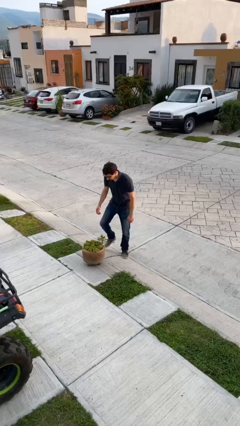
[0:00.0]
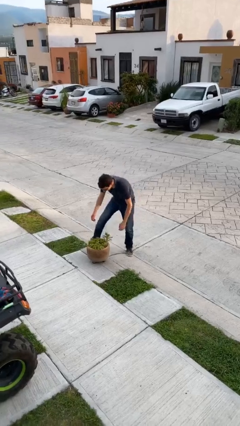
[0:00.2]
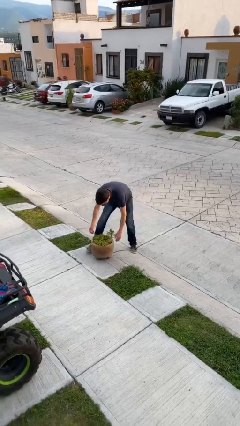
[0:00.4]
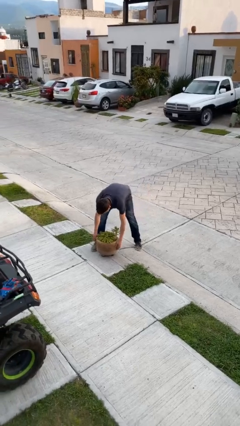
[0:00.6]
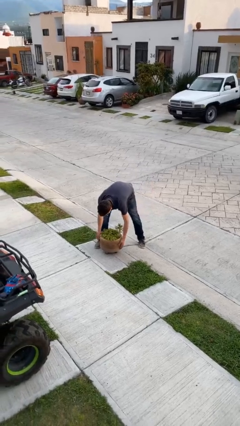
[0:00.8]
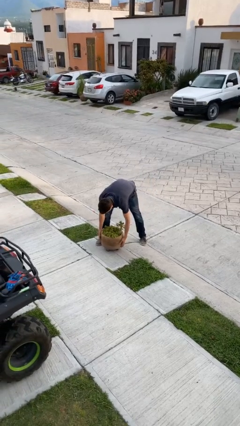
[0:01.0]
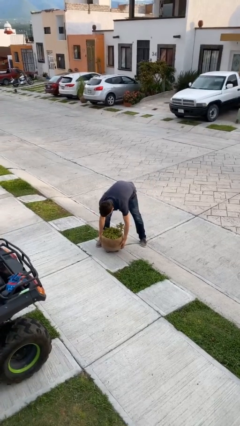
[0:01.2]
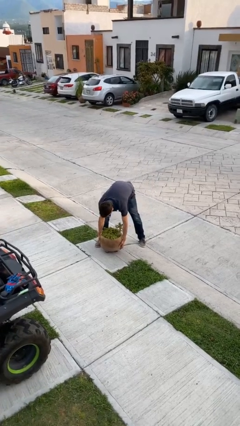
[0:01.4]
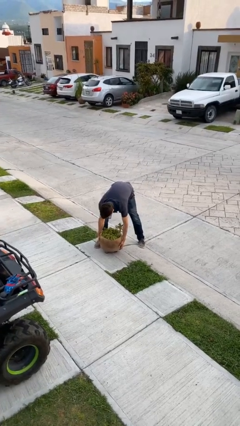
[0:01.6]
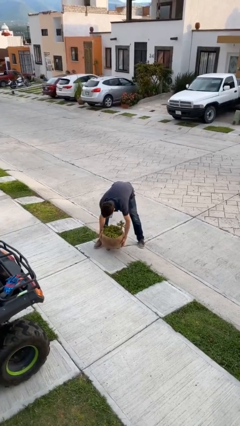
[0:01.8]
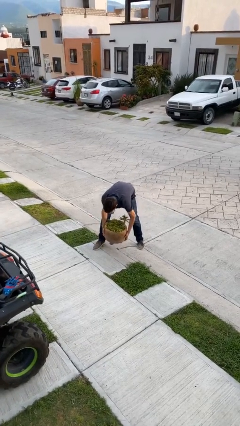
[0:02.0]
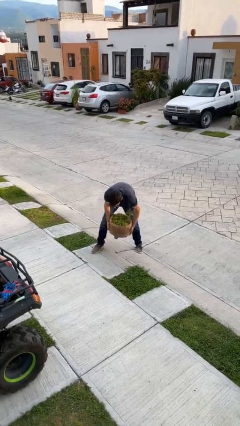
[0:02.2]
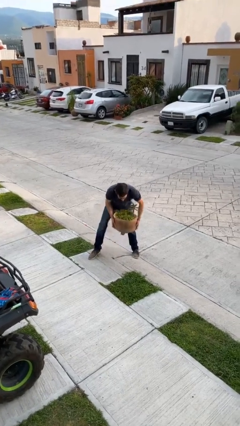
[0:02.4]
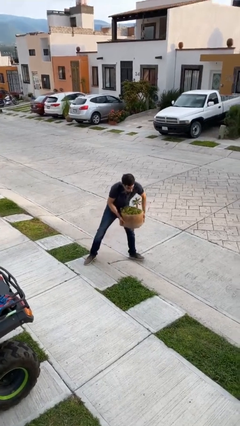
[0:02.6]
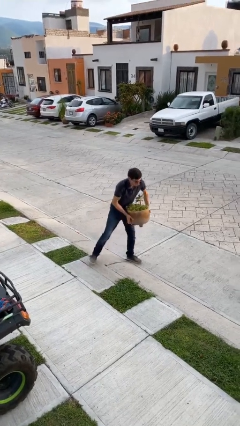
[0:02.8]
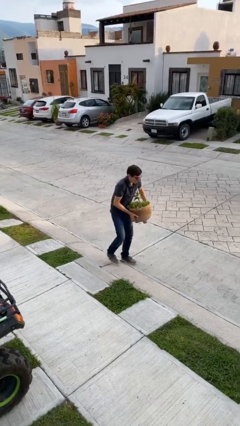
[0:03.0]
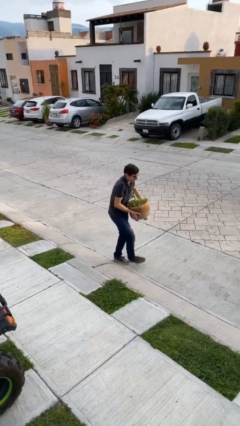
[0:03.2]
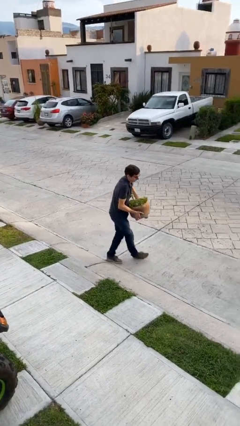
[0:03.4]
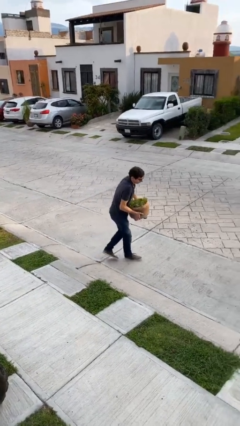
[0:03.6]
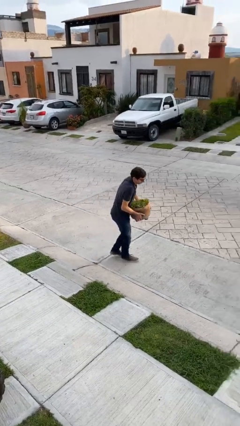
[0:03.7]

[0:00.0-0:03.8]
person picks up object from floor

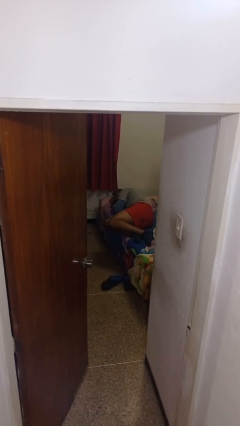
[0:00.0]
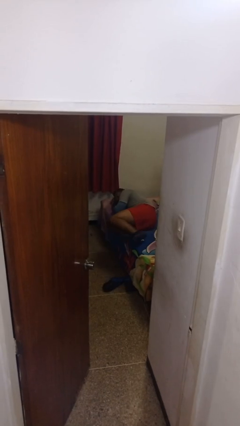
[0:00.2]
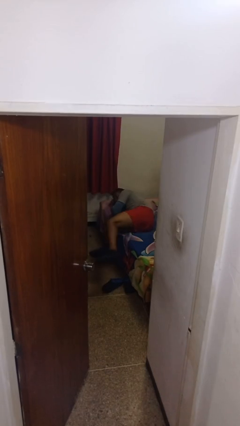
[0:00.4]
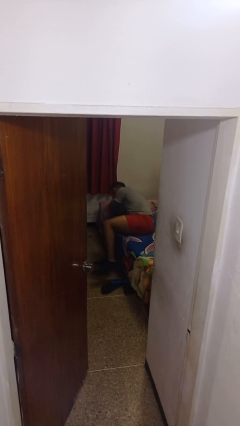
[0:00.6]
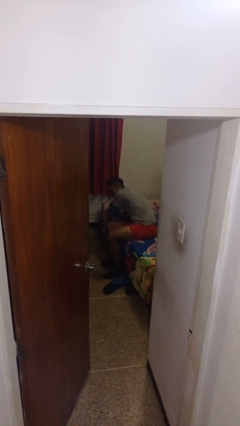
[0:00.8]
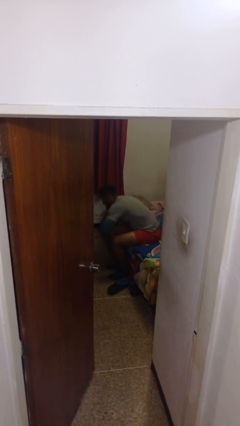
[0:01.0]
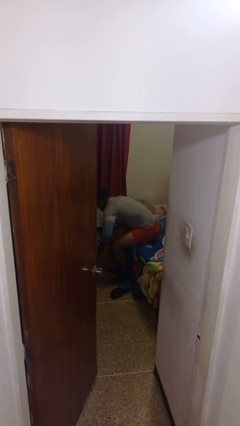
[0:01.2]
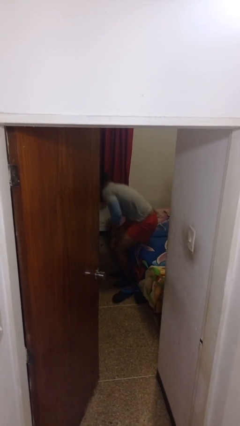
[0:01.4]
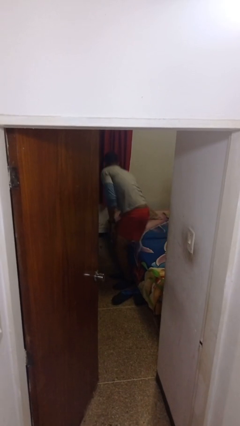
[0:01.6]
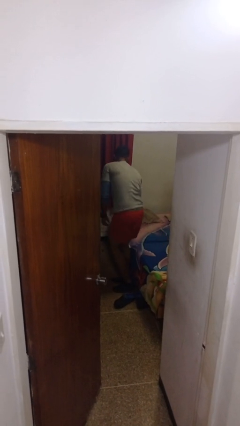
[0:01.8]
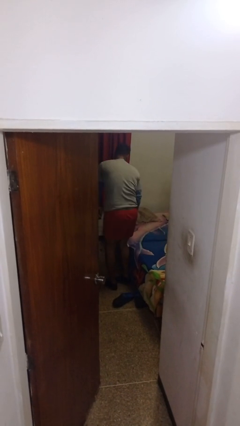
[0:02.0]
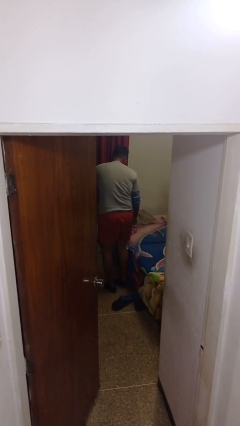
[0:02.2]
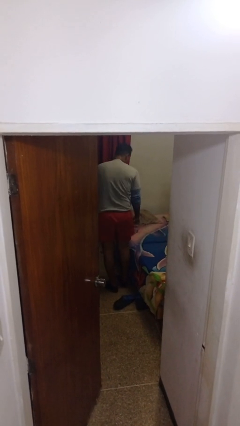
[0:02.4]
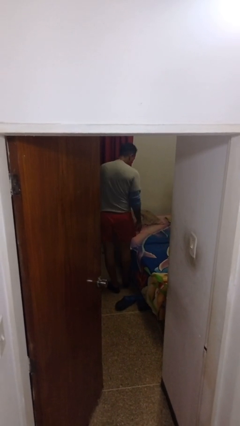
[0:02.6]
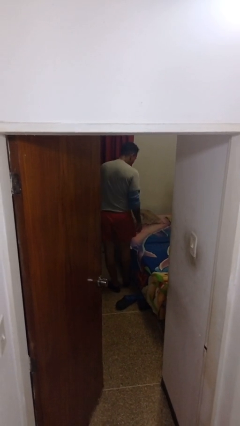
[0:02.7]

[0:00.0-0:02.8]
person stands up

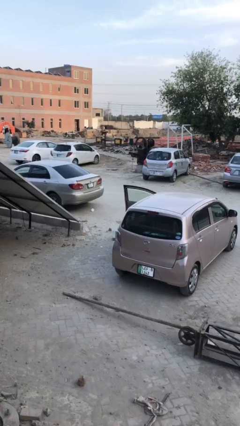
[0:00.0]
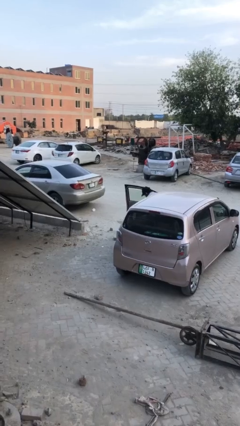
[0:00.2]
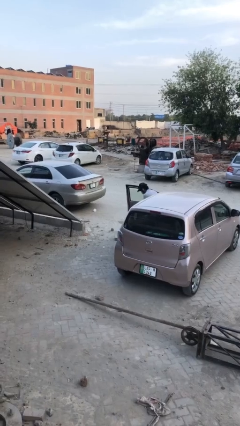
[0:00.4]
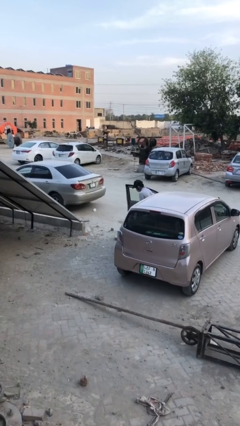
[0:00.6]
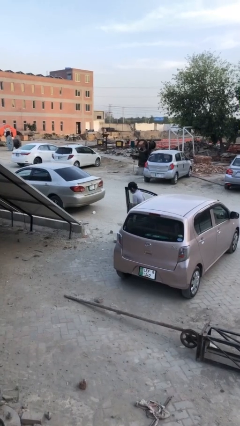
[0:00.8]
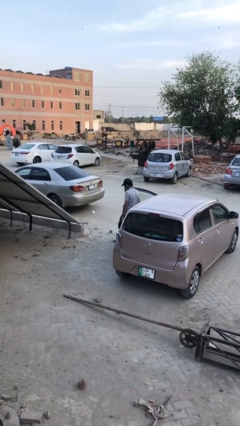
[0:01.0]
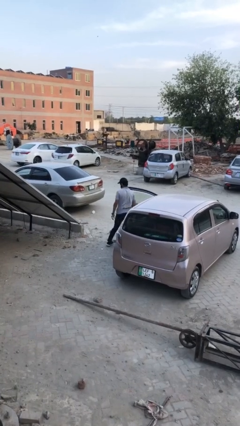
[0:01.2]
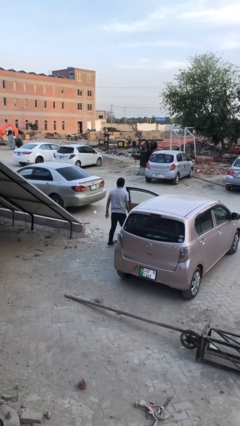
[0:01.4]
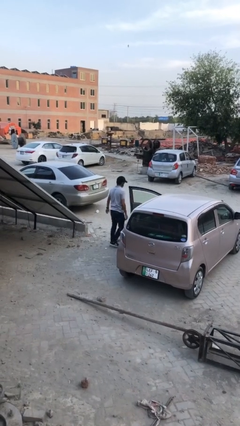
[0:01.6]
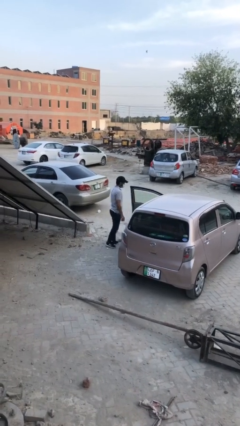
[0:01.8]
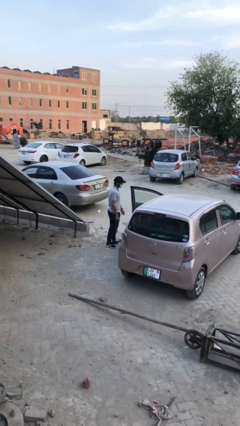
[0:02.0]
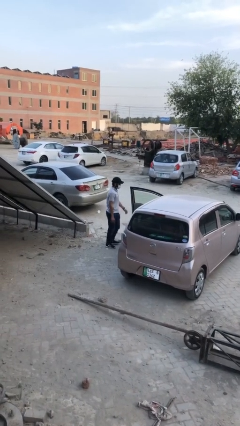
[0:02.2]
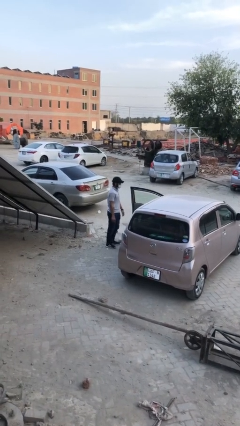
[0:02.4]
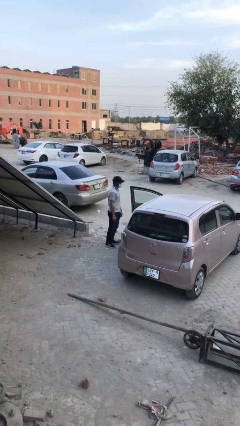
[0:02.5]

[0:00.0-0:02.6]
person exits car

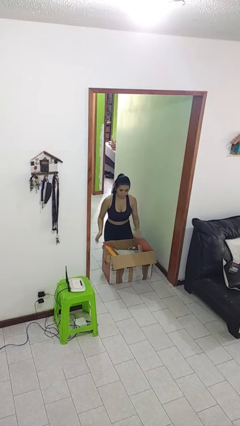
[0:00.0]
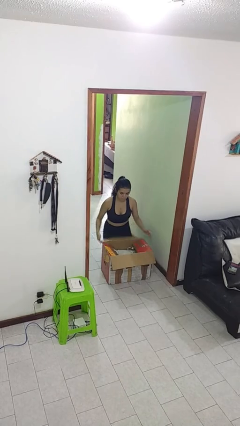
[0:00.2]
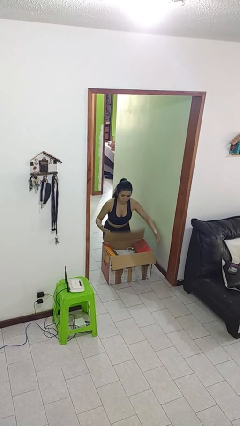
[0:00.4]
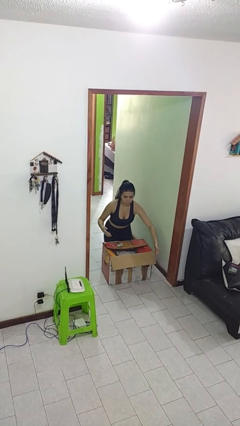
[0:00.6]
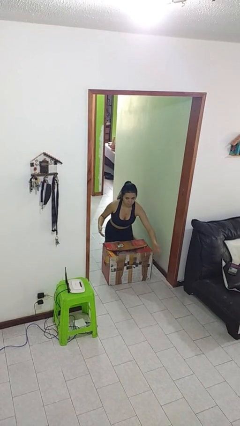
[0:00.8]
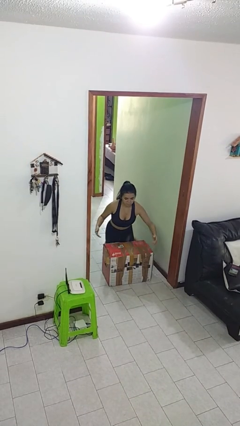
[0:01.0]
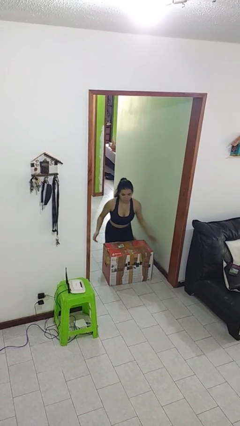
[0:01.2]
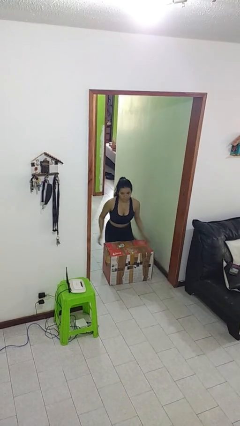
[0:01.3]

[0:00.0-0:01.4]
person closes box

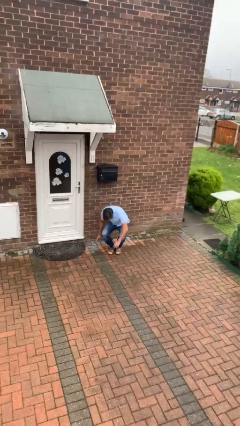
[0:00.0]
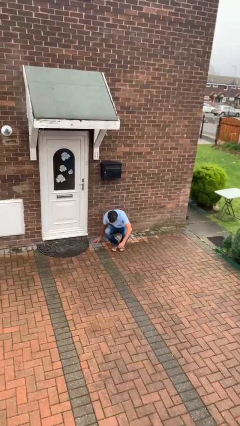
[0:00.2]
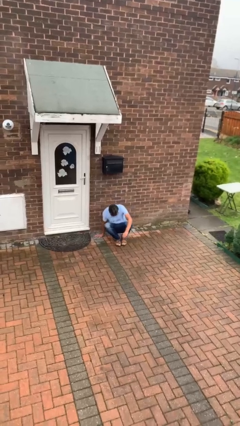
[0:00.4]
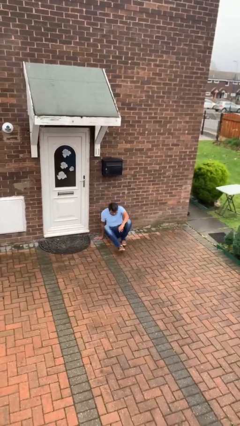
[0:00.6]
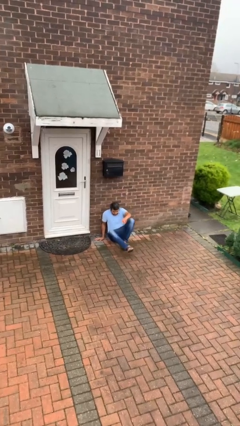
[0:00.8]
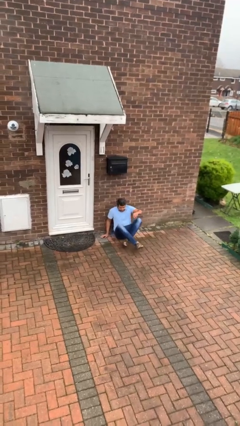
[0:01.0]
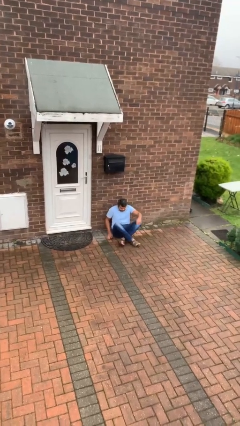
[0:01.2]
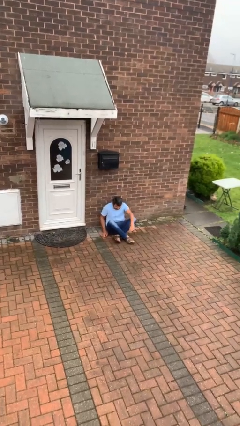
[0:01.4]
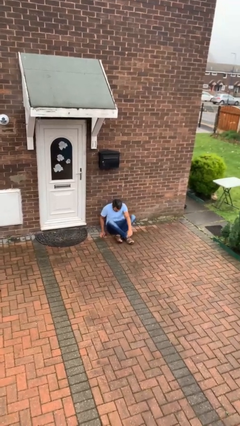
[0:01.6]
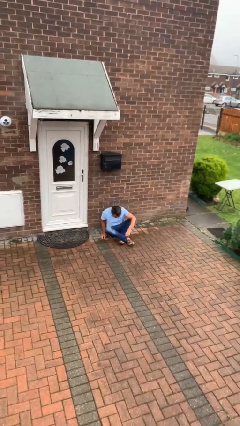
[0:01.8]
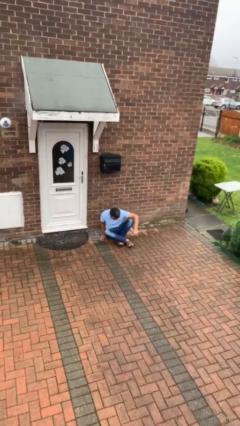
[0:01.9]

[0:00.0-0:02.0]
person sits down

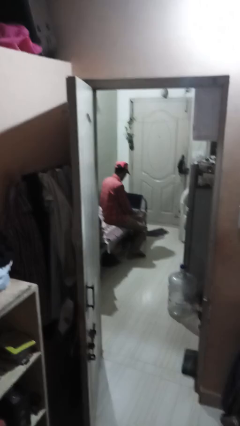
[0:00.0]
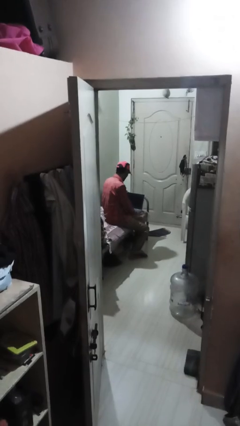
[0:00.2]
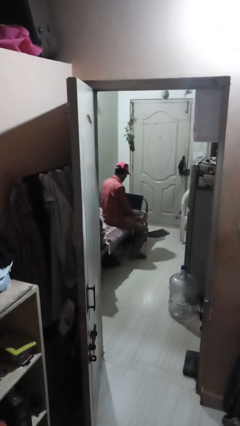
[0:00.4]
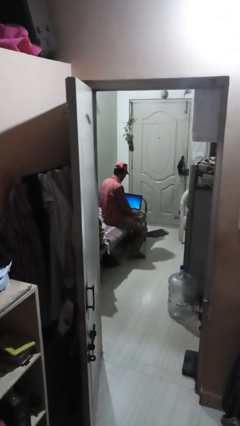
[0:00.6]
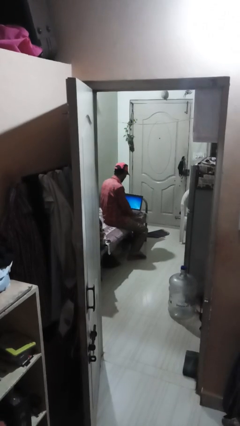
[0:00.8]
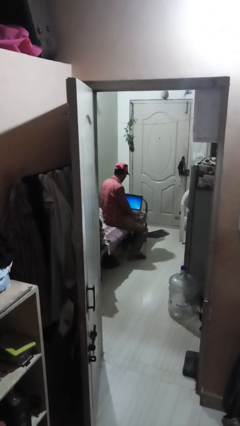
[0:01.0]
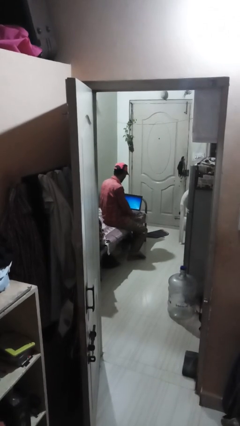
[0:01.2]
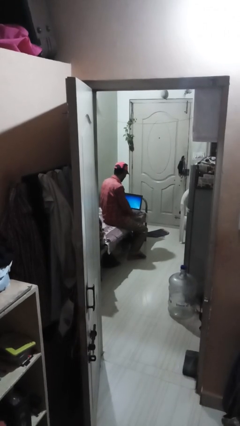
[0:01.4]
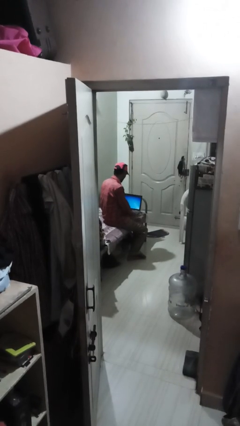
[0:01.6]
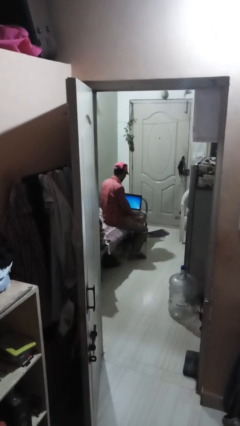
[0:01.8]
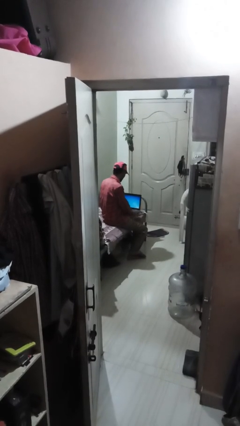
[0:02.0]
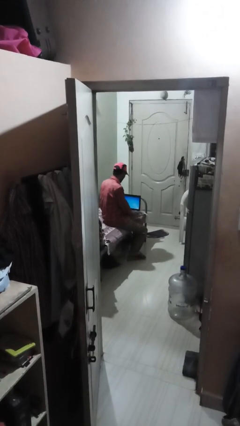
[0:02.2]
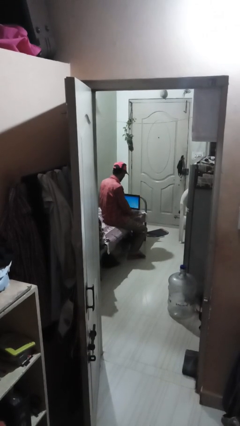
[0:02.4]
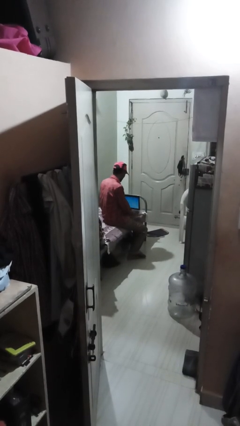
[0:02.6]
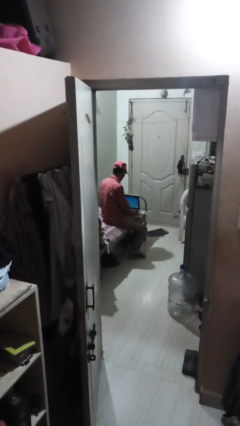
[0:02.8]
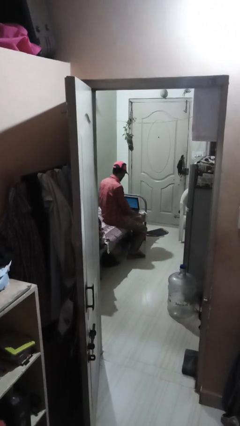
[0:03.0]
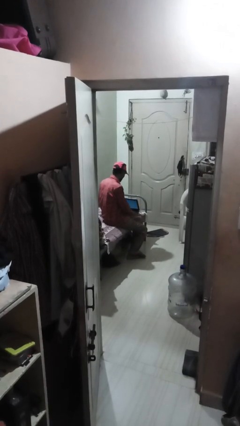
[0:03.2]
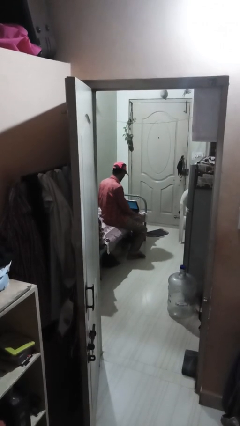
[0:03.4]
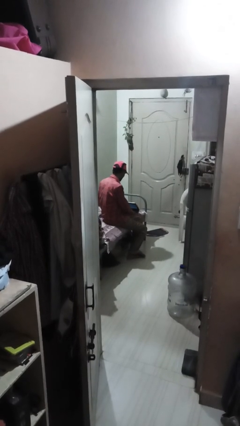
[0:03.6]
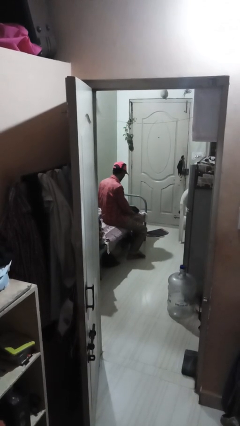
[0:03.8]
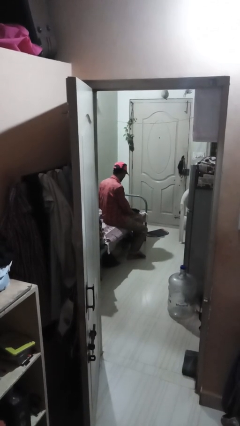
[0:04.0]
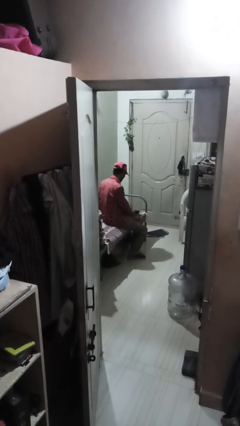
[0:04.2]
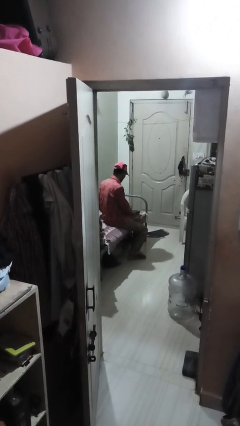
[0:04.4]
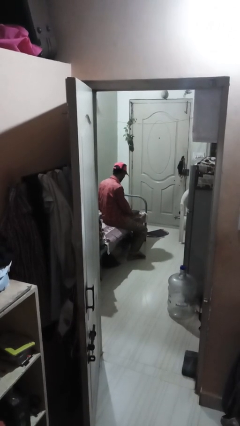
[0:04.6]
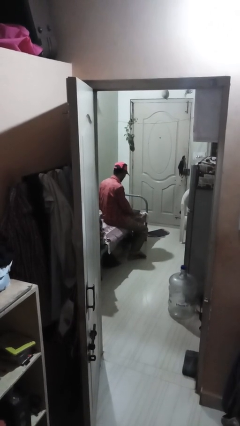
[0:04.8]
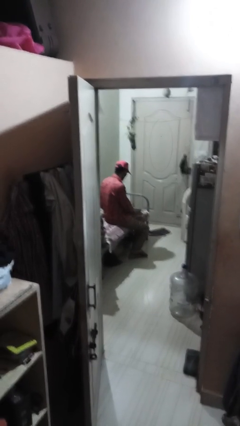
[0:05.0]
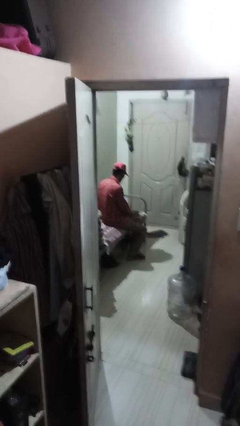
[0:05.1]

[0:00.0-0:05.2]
person closes laptop
